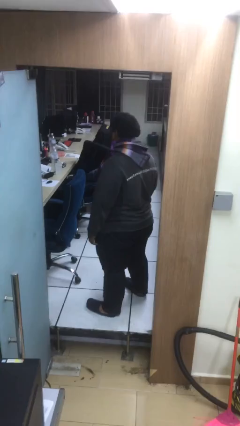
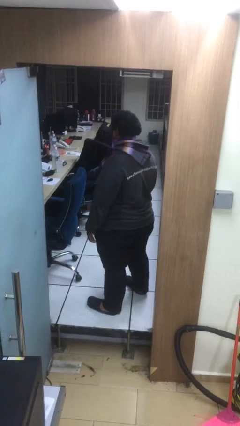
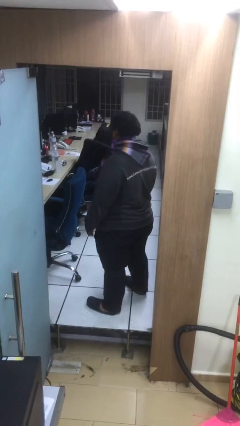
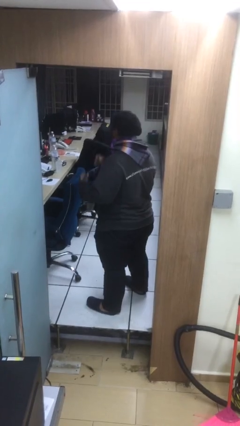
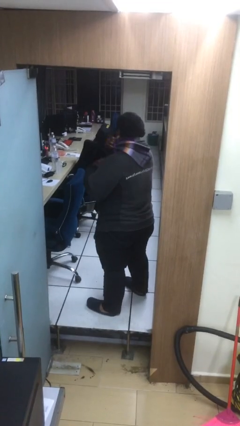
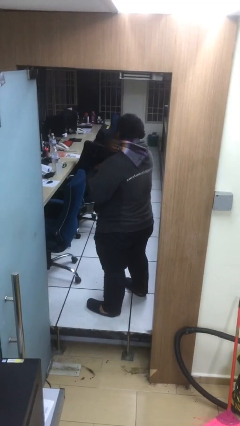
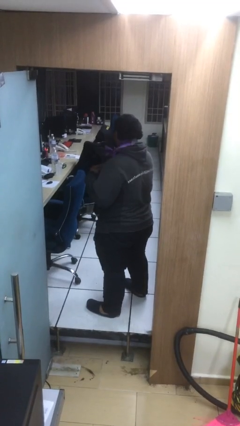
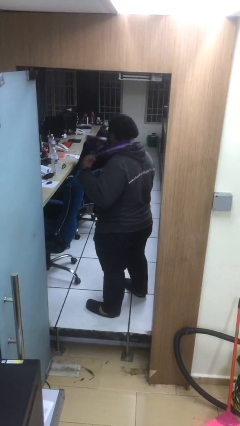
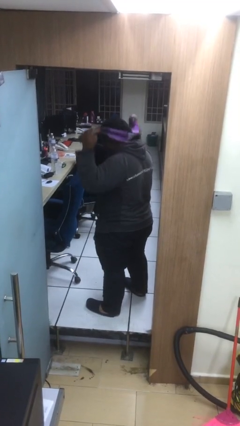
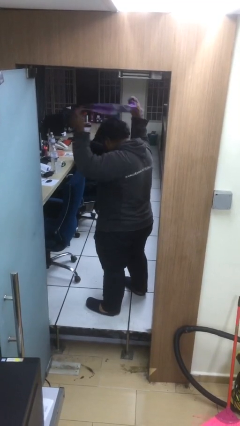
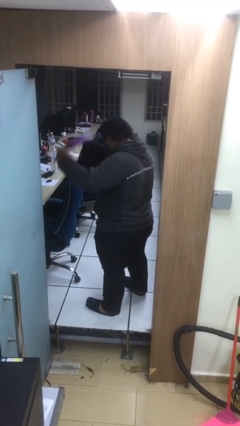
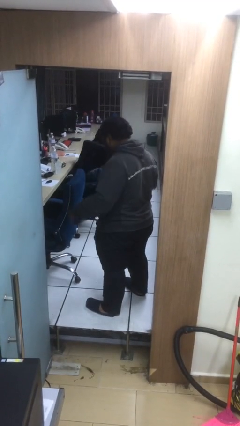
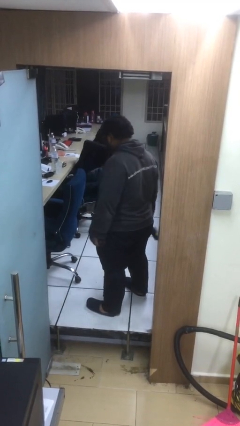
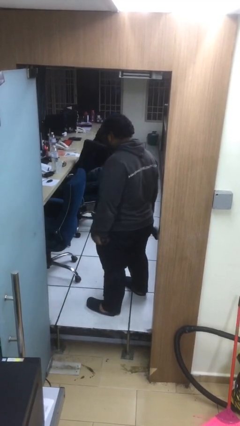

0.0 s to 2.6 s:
person takes off scarf

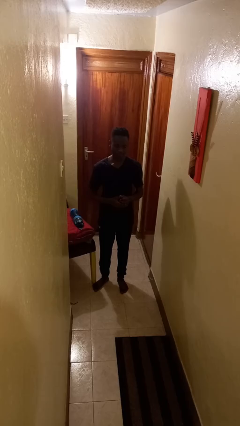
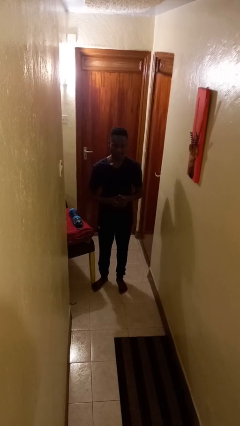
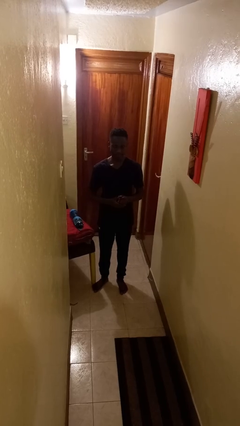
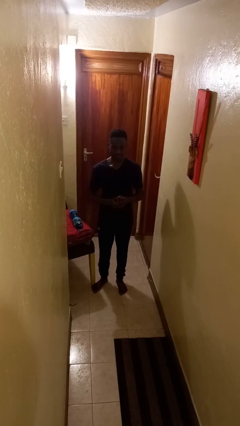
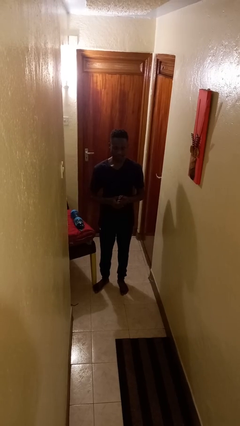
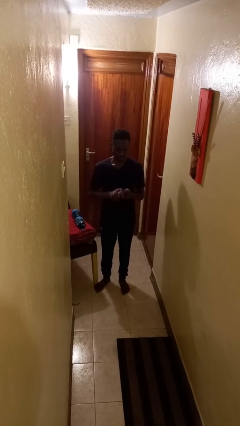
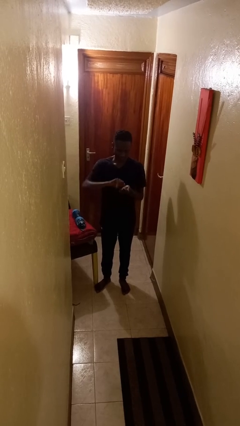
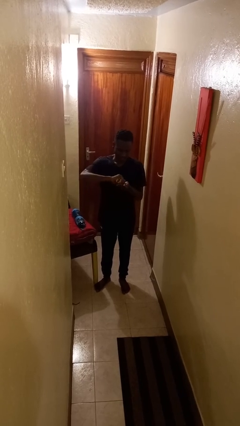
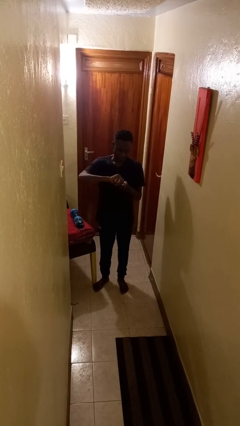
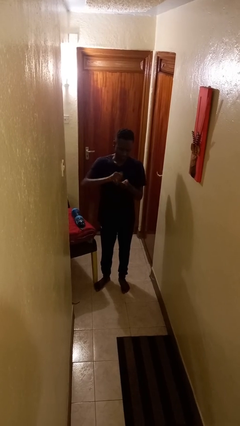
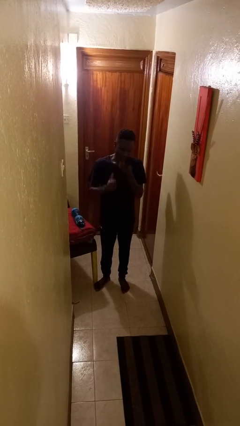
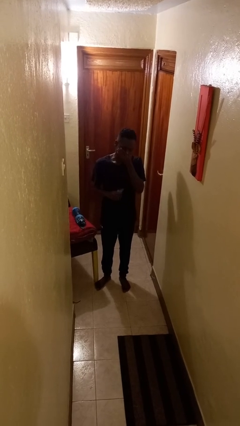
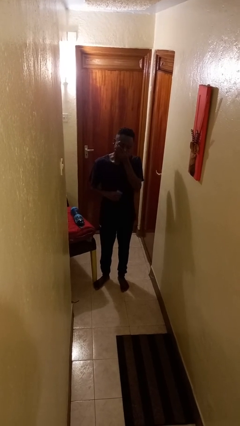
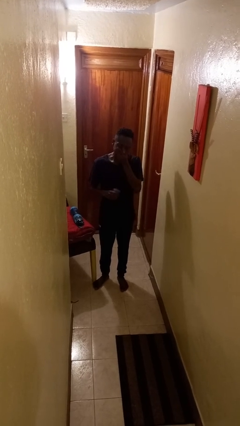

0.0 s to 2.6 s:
person takes medicine pills

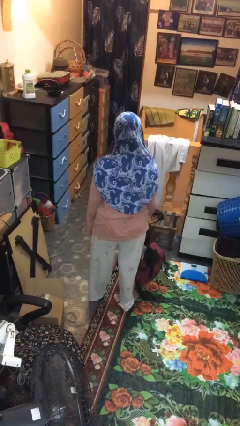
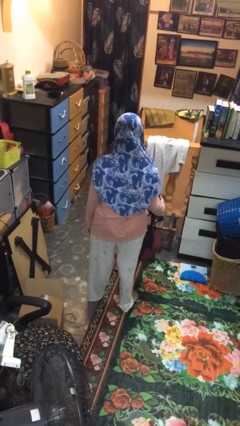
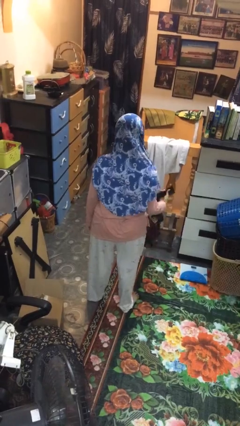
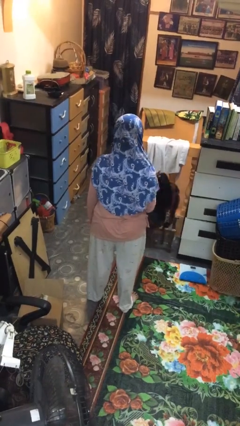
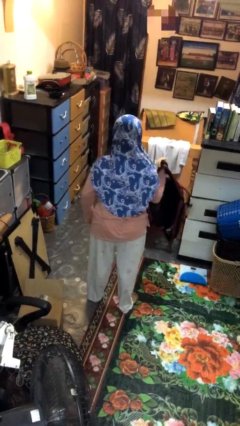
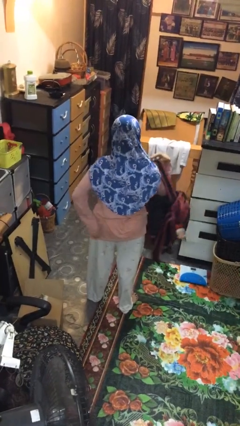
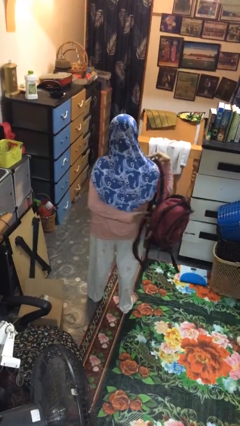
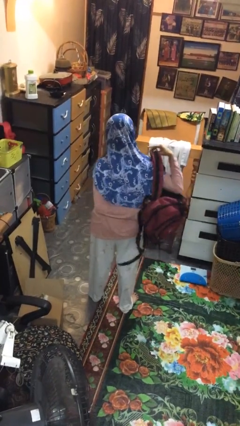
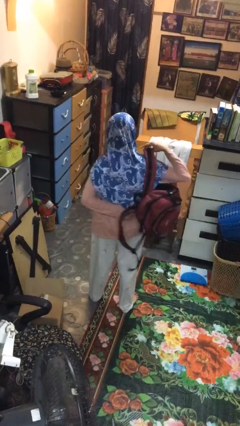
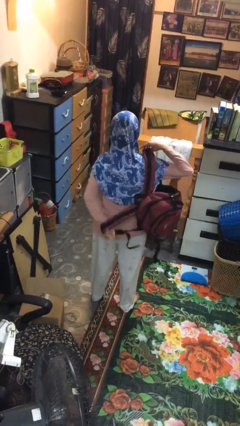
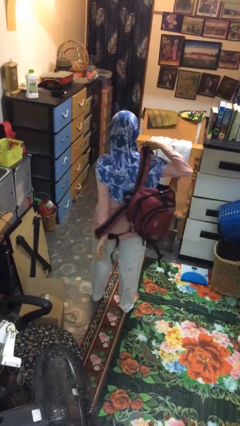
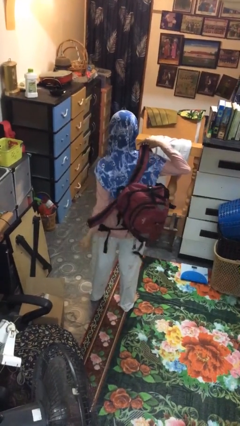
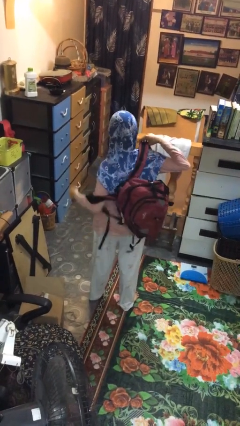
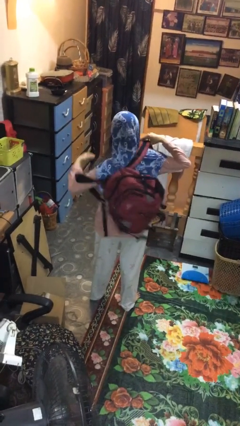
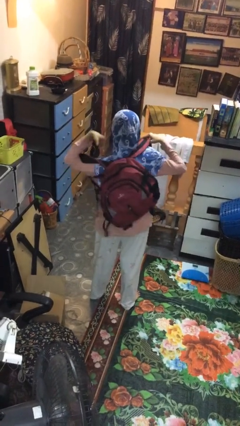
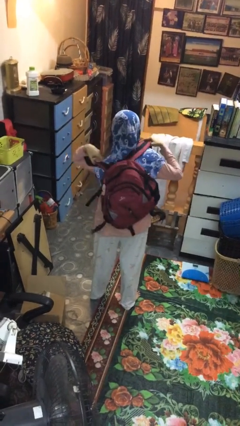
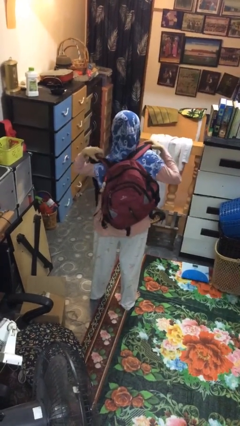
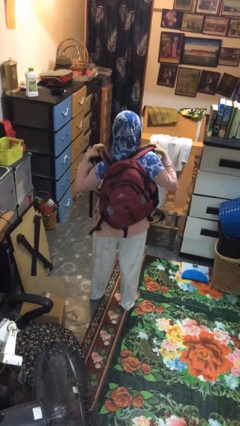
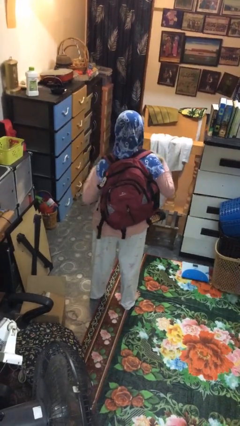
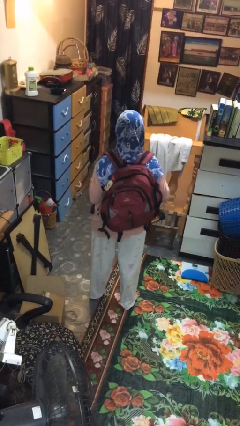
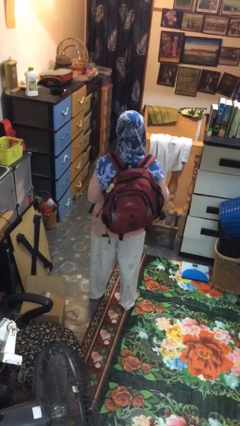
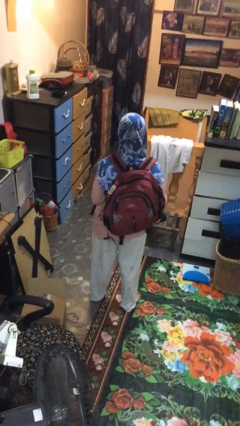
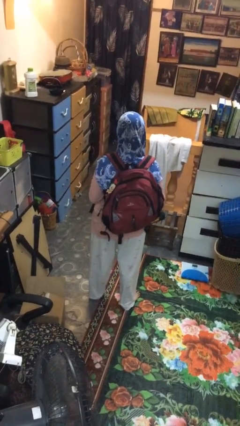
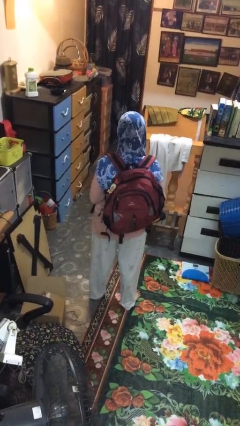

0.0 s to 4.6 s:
person puts on backpack

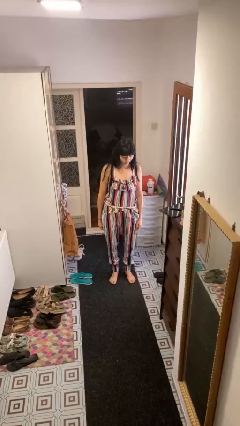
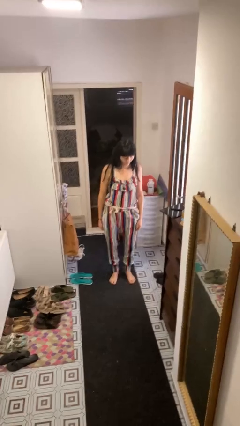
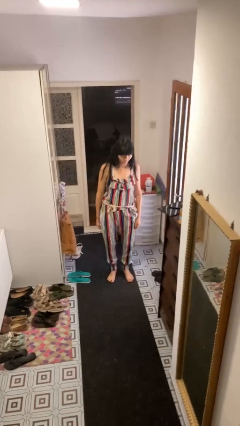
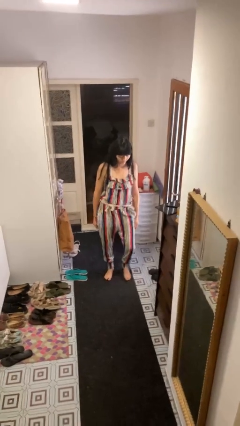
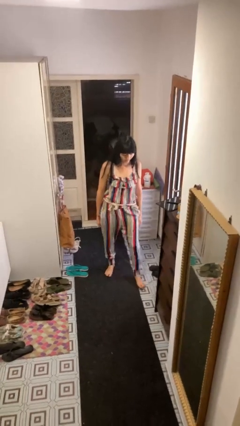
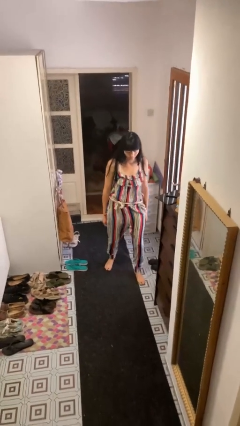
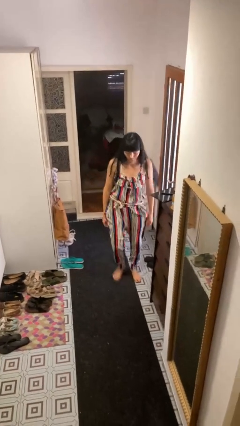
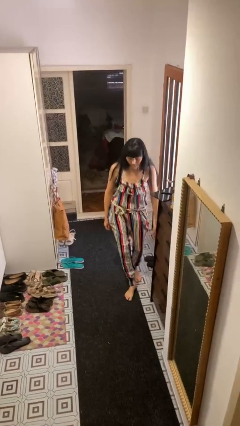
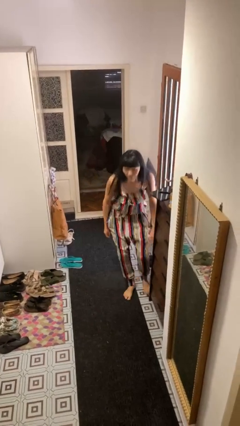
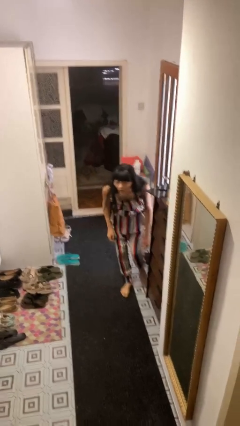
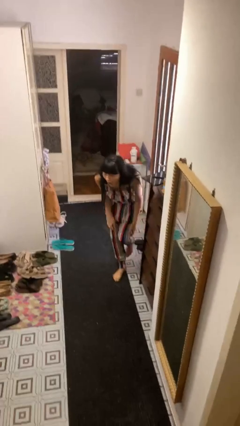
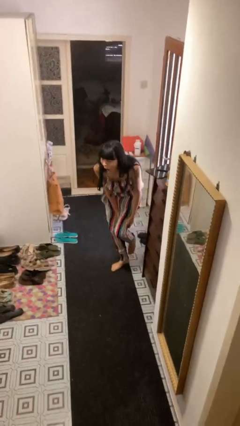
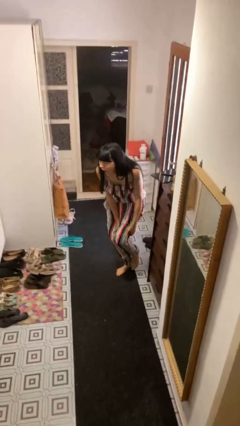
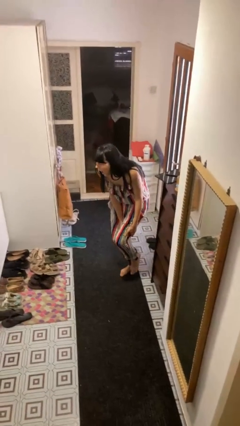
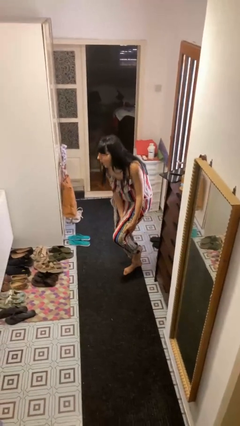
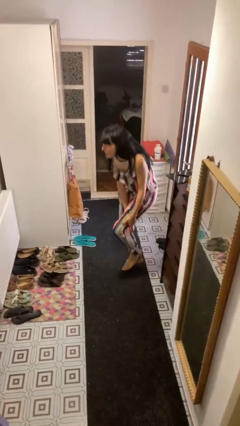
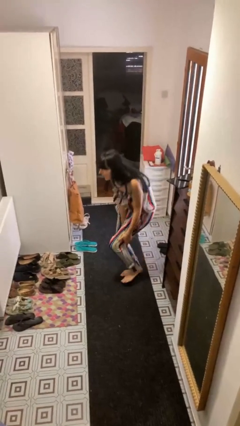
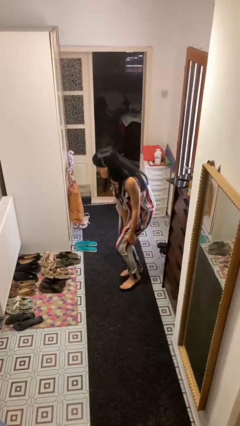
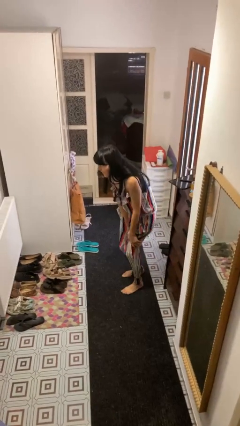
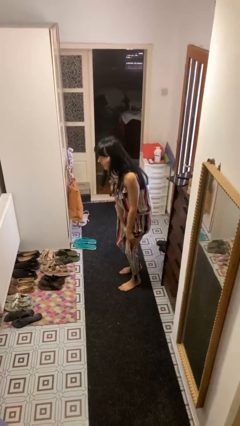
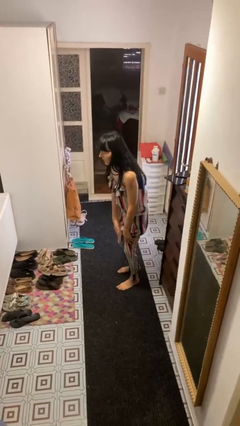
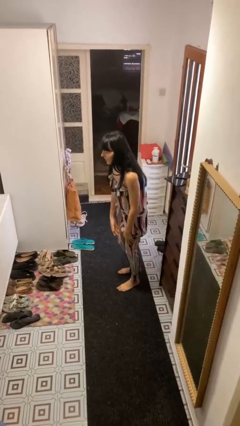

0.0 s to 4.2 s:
person stubs toe

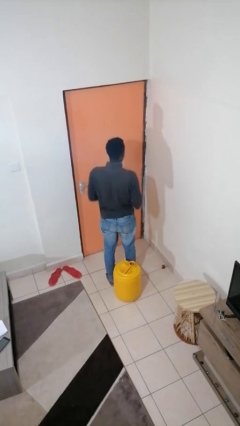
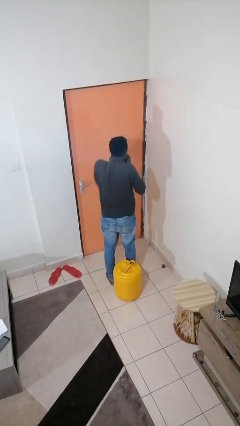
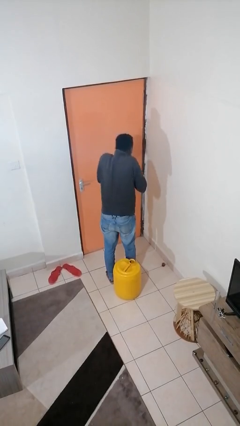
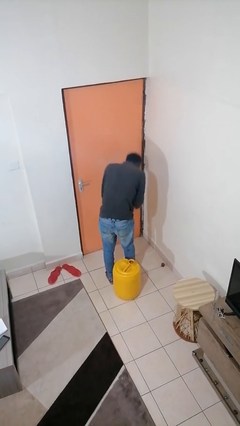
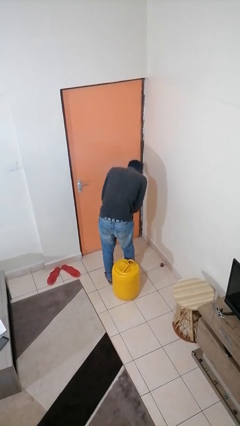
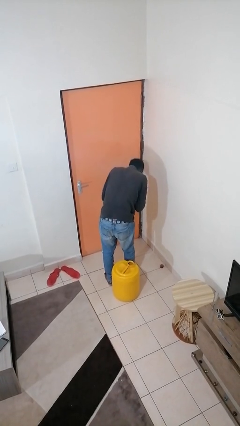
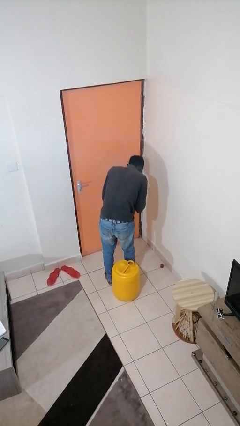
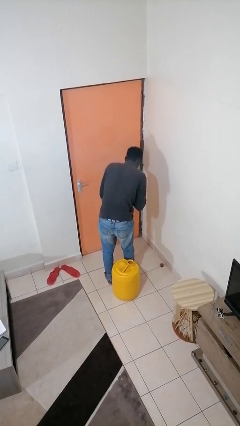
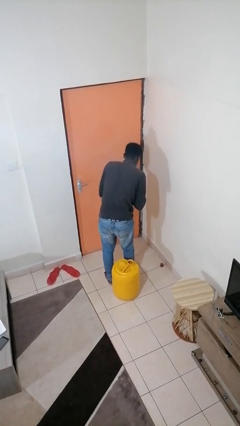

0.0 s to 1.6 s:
person sneezes into hand

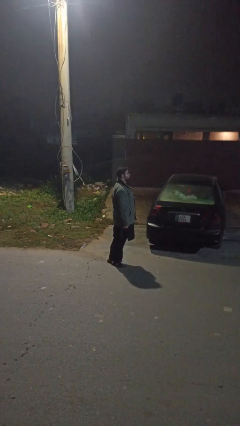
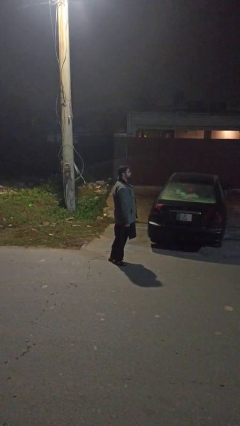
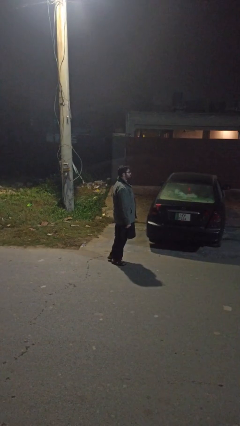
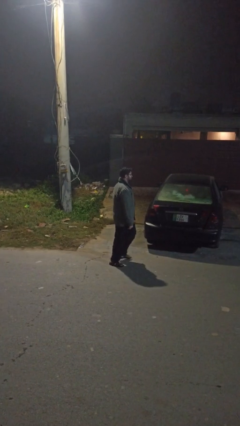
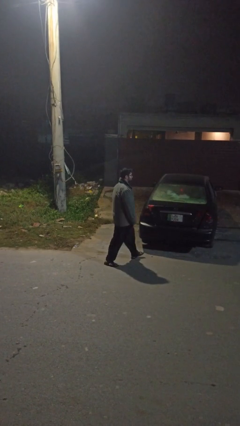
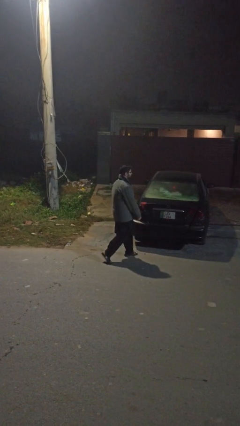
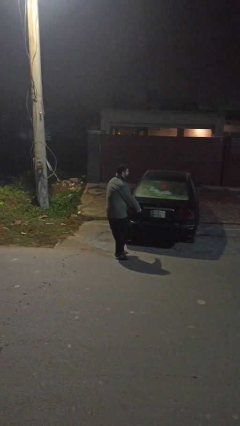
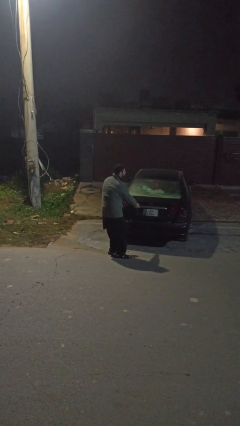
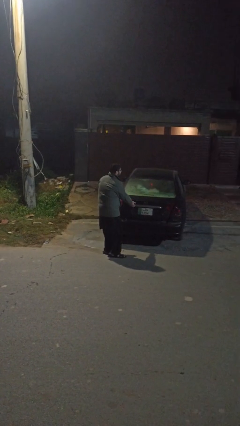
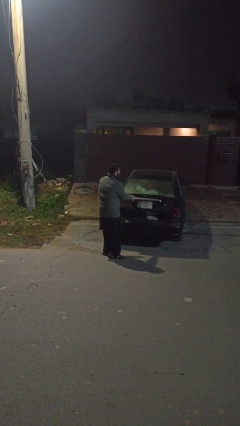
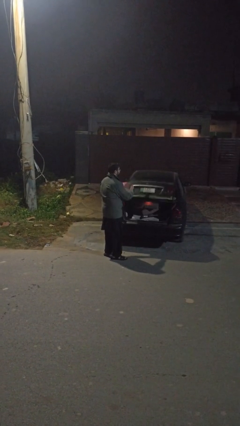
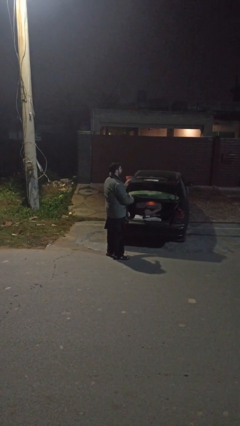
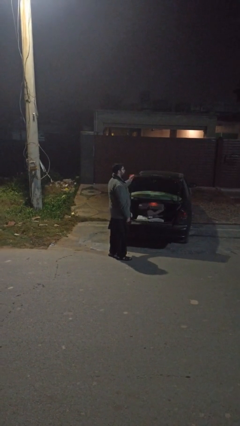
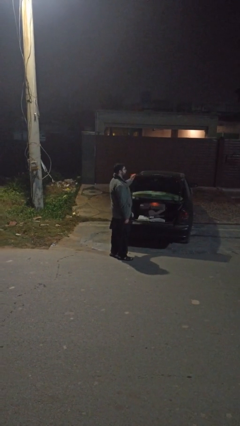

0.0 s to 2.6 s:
person opens car trunk
